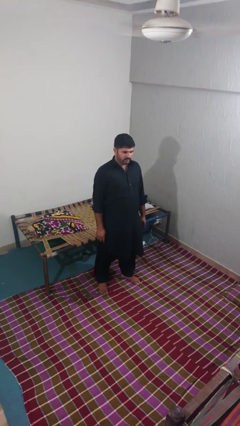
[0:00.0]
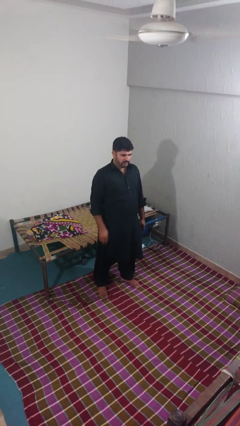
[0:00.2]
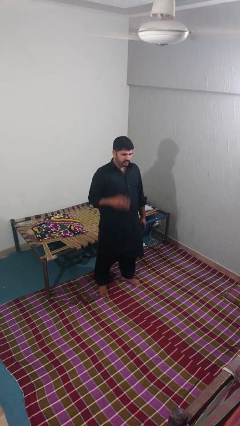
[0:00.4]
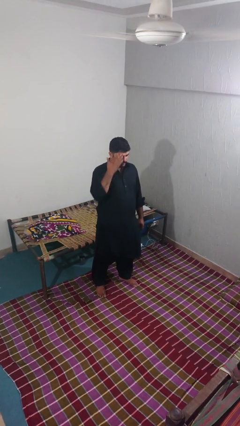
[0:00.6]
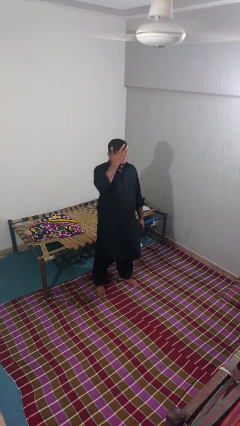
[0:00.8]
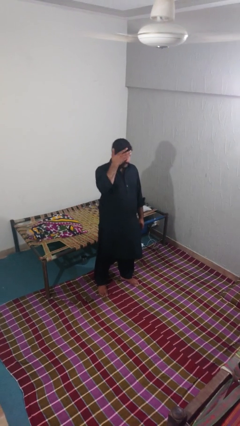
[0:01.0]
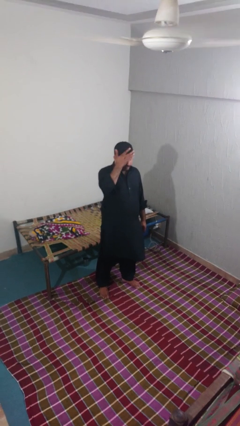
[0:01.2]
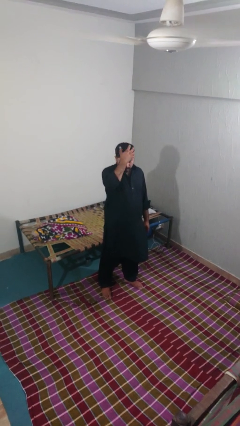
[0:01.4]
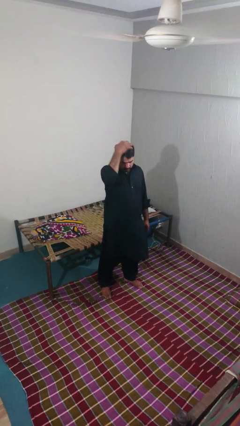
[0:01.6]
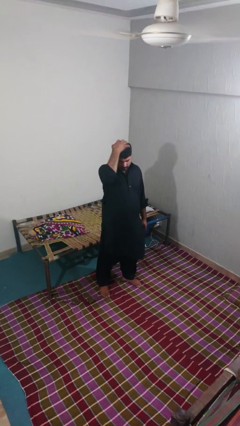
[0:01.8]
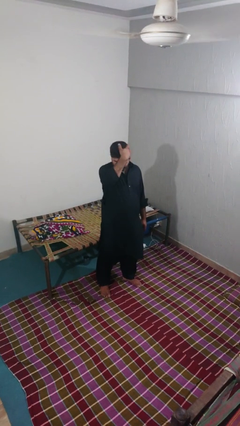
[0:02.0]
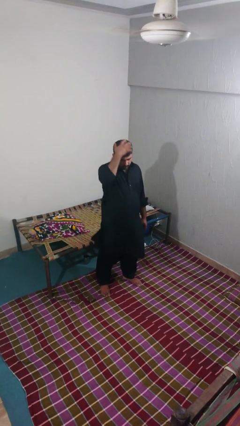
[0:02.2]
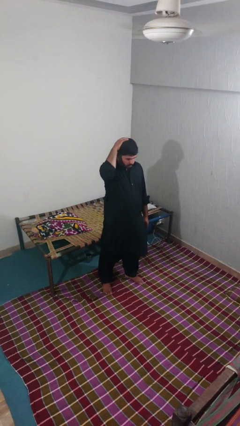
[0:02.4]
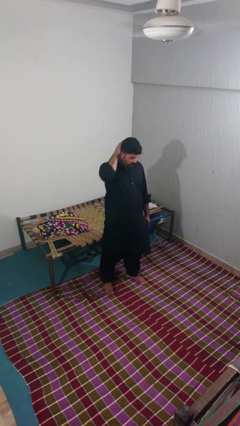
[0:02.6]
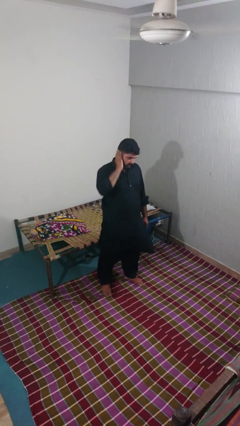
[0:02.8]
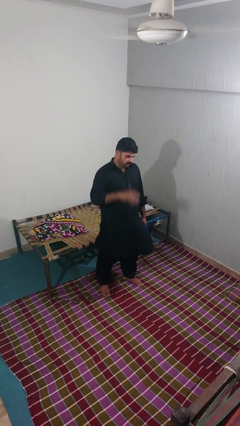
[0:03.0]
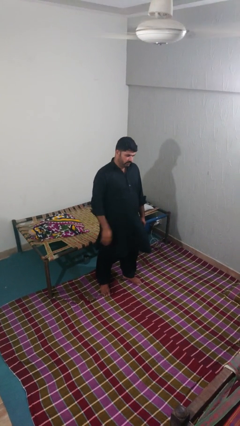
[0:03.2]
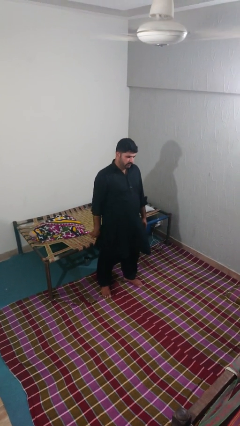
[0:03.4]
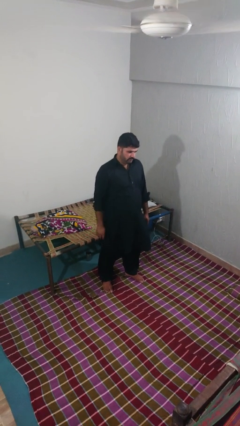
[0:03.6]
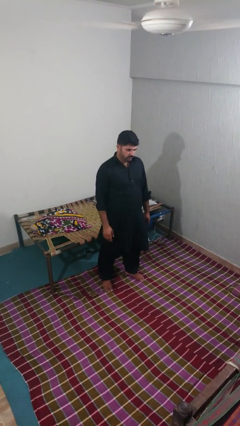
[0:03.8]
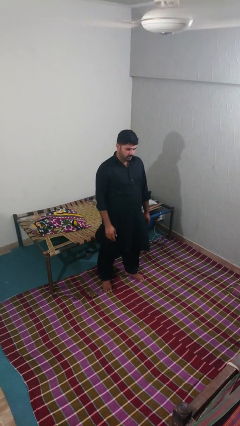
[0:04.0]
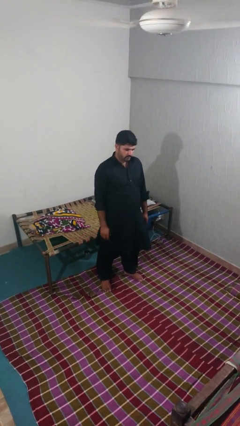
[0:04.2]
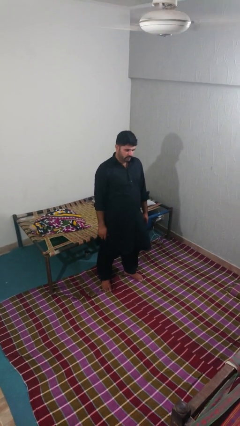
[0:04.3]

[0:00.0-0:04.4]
person scratches face

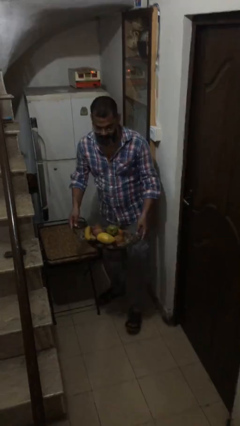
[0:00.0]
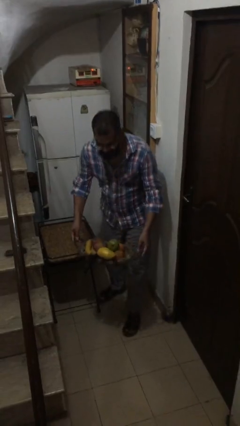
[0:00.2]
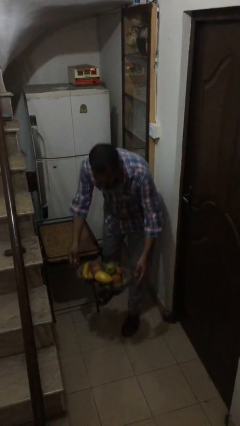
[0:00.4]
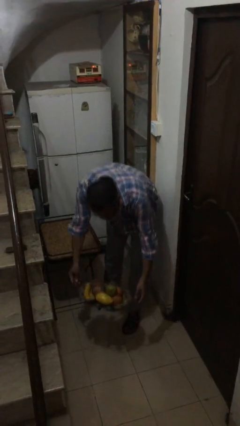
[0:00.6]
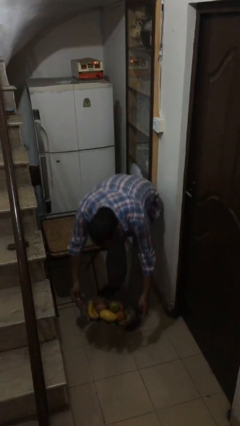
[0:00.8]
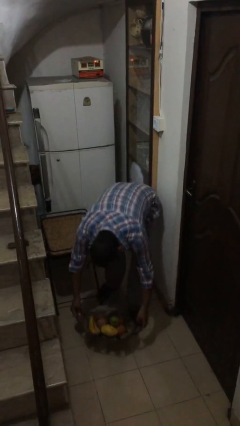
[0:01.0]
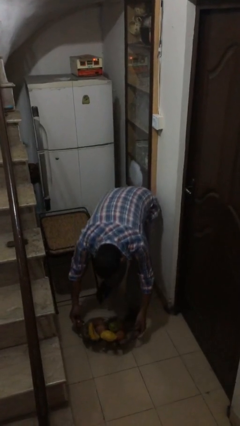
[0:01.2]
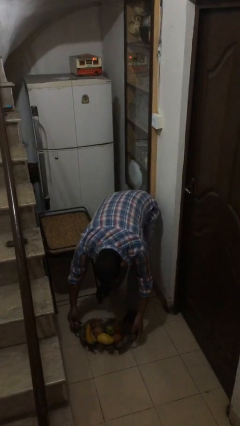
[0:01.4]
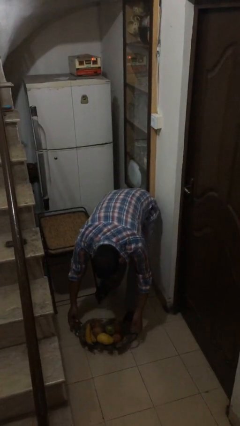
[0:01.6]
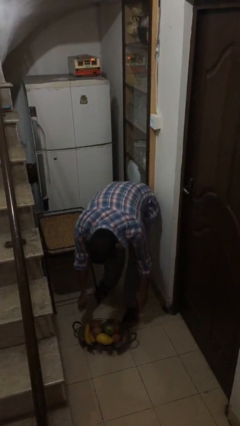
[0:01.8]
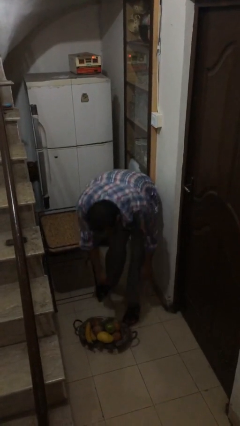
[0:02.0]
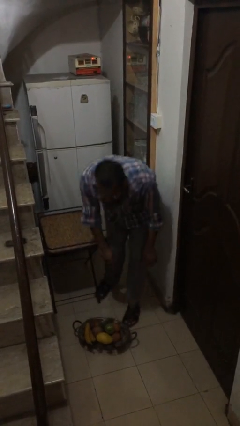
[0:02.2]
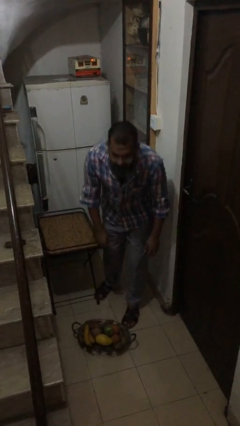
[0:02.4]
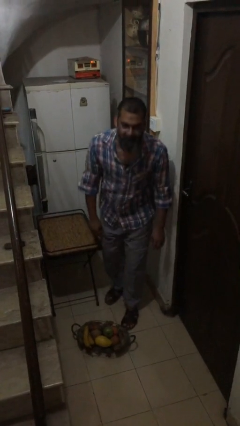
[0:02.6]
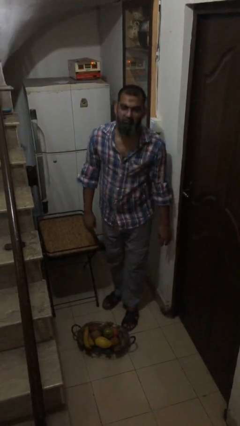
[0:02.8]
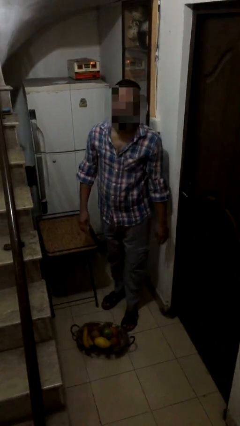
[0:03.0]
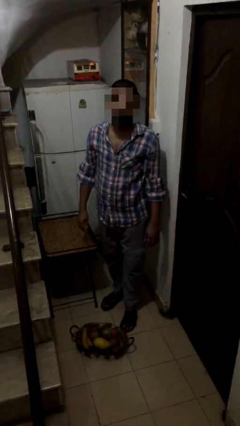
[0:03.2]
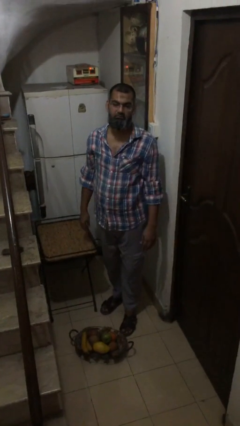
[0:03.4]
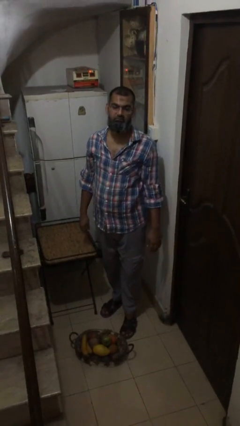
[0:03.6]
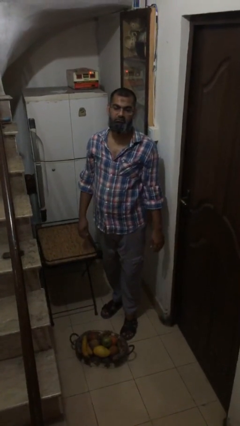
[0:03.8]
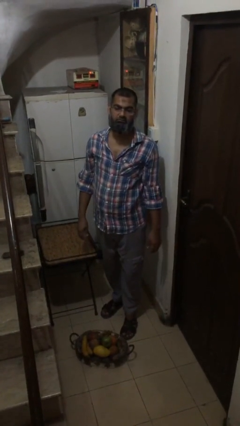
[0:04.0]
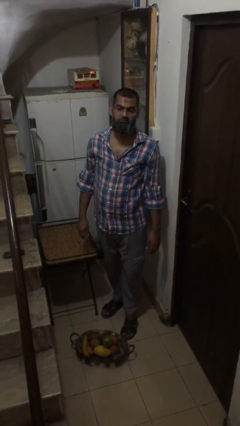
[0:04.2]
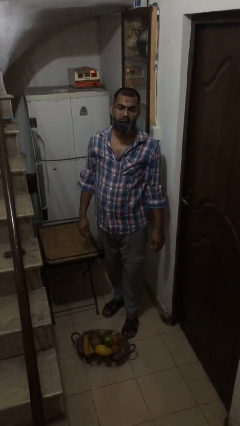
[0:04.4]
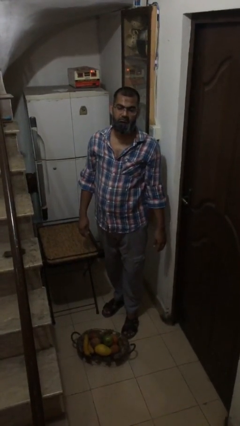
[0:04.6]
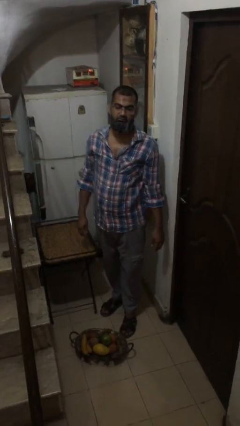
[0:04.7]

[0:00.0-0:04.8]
person puts down object on floor

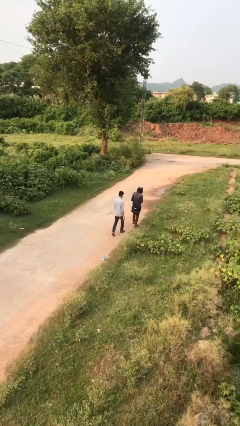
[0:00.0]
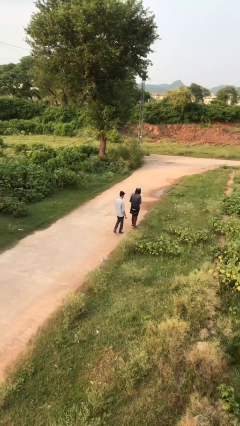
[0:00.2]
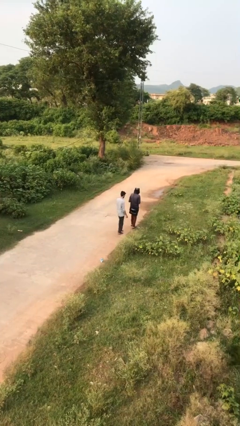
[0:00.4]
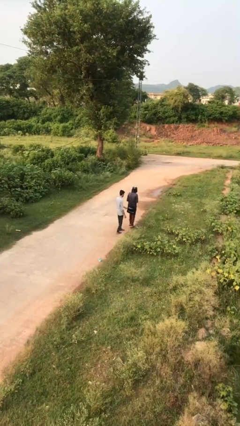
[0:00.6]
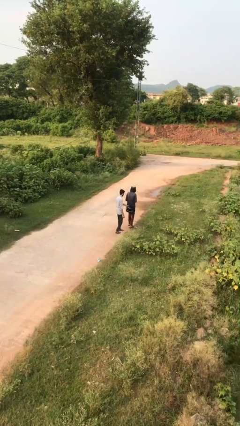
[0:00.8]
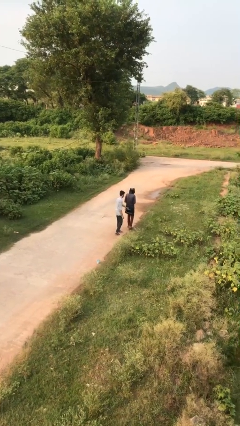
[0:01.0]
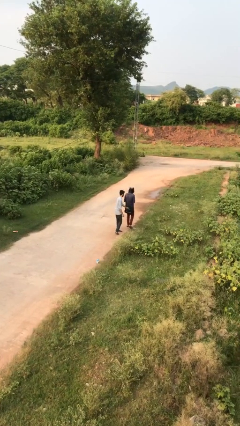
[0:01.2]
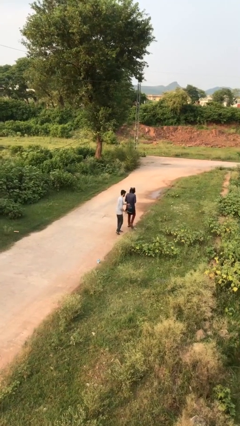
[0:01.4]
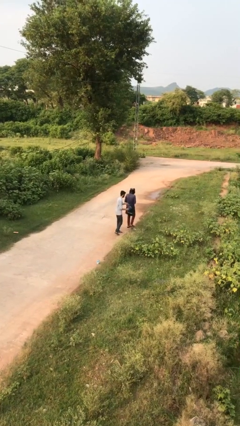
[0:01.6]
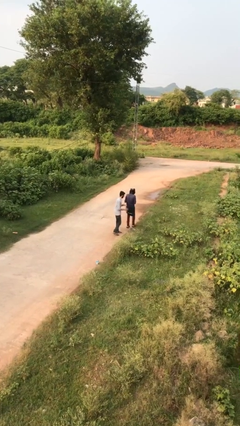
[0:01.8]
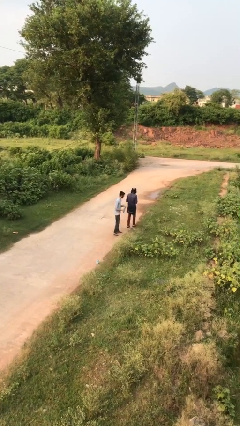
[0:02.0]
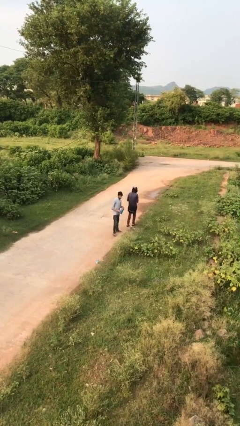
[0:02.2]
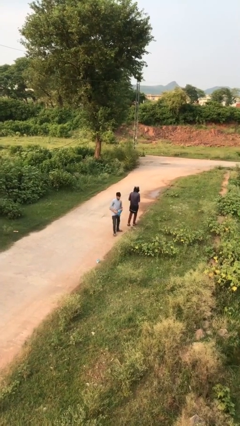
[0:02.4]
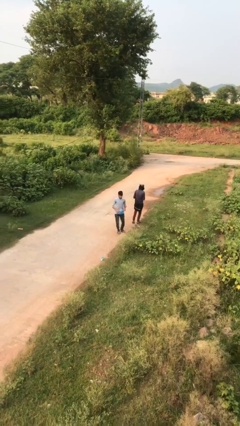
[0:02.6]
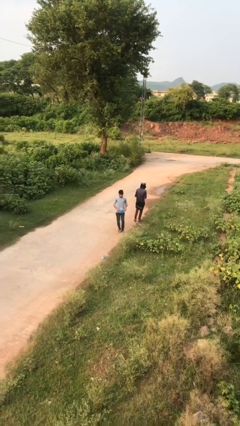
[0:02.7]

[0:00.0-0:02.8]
person steals object from person

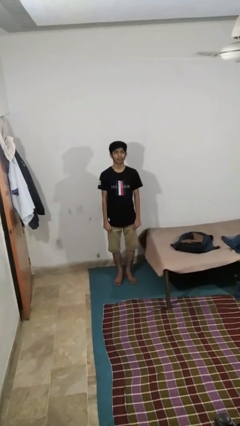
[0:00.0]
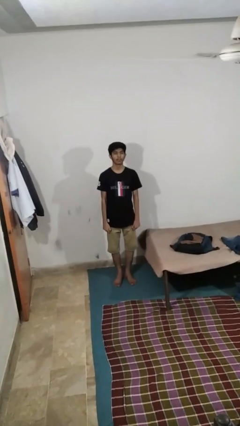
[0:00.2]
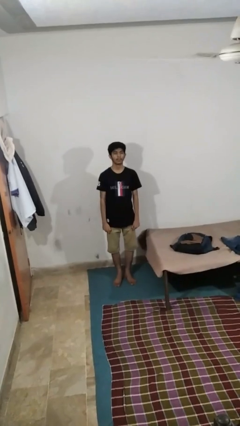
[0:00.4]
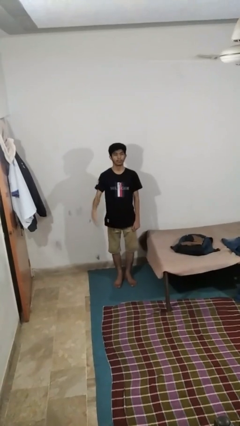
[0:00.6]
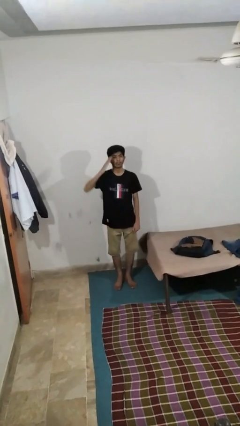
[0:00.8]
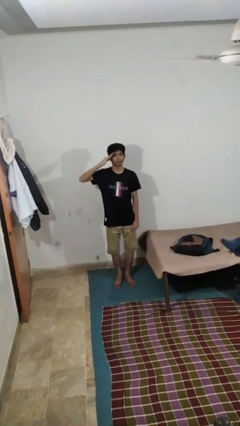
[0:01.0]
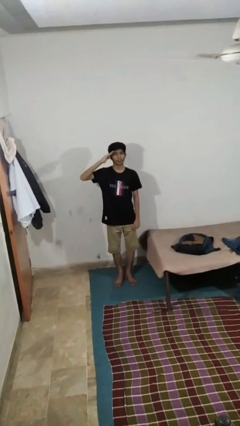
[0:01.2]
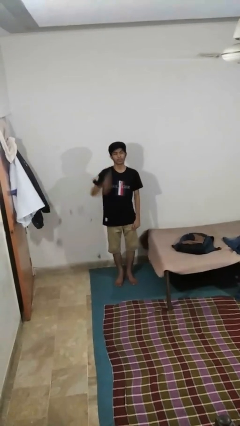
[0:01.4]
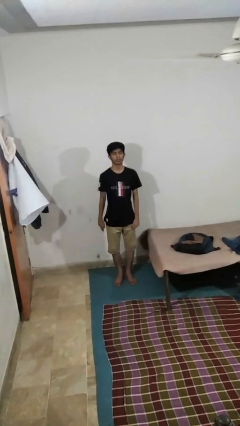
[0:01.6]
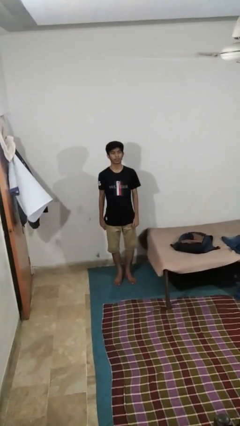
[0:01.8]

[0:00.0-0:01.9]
person salutes

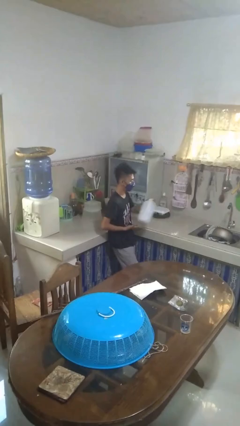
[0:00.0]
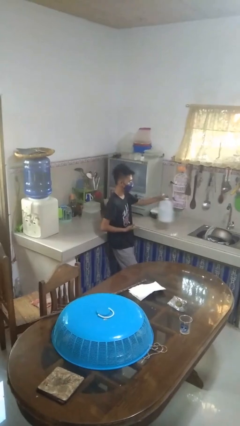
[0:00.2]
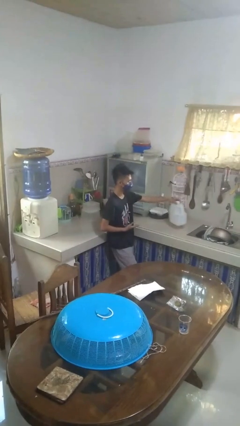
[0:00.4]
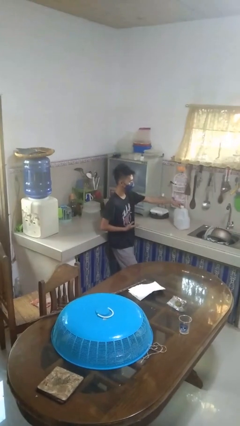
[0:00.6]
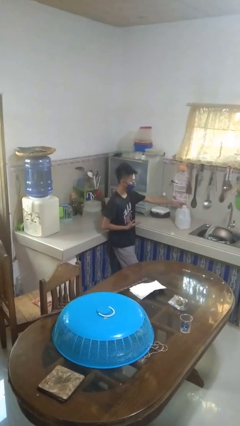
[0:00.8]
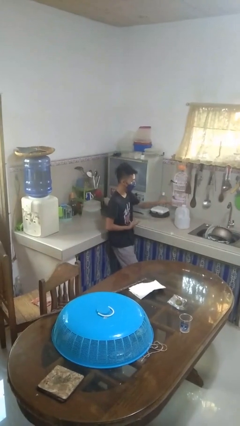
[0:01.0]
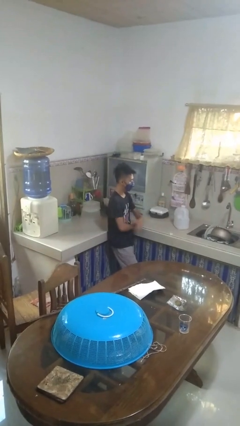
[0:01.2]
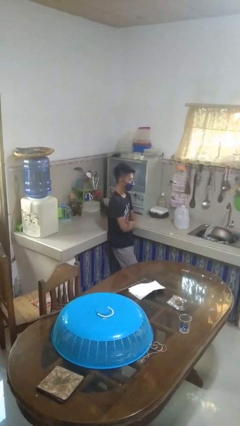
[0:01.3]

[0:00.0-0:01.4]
person puts down object on countertop

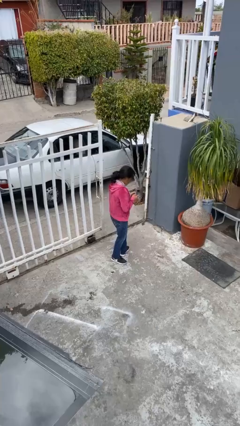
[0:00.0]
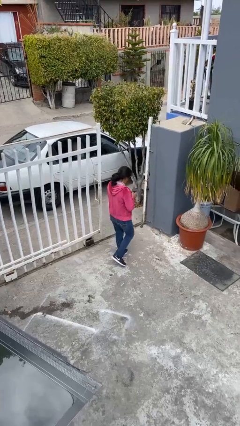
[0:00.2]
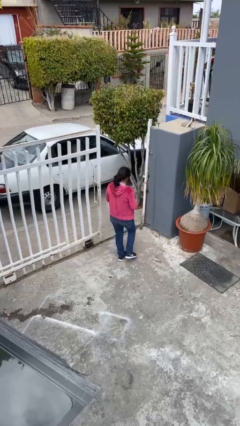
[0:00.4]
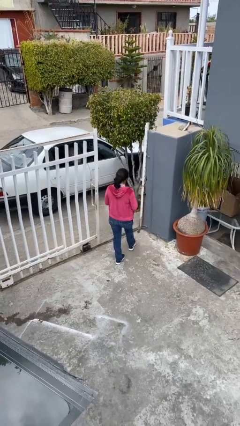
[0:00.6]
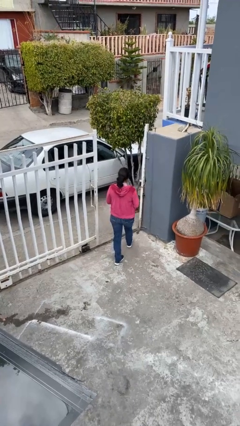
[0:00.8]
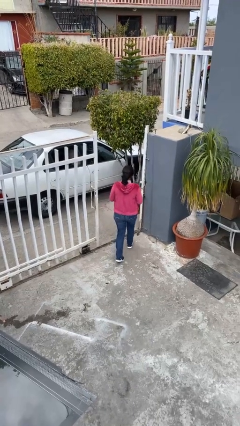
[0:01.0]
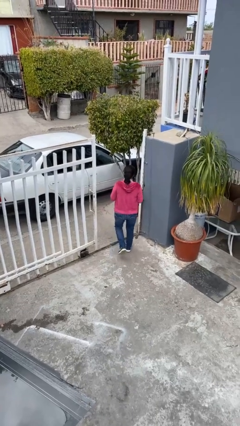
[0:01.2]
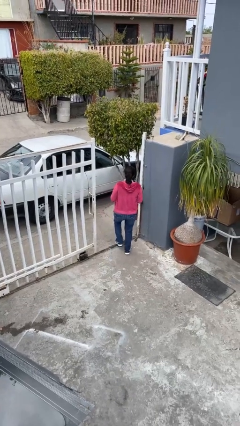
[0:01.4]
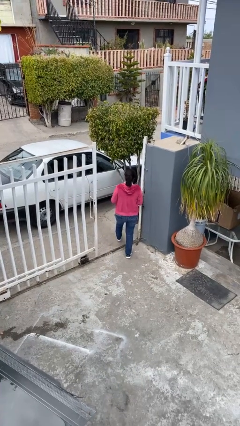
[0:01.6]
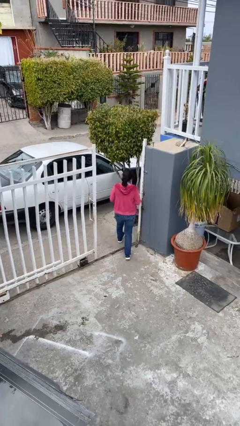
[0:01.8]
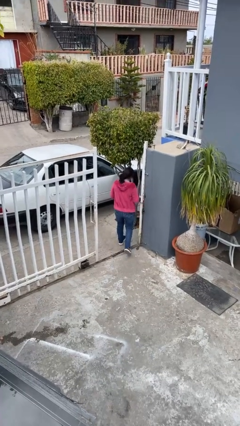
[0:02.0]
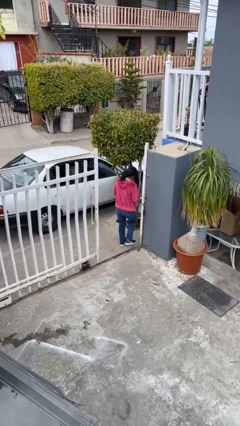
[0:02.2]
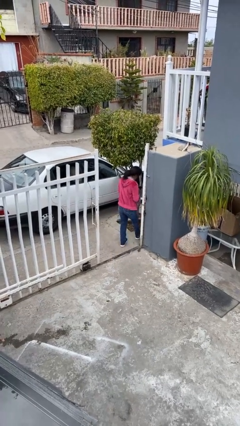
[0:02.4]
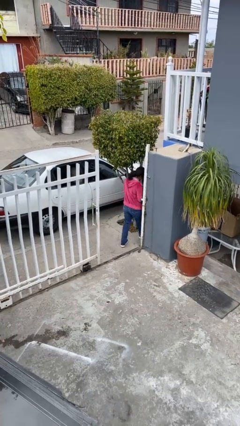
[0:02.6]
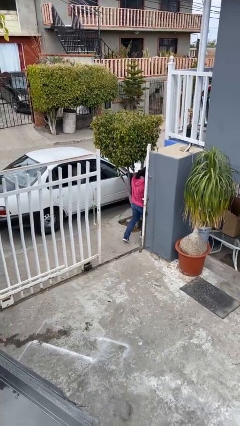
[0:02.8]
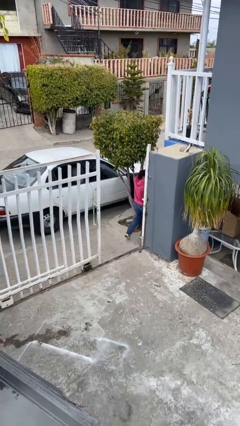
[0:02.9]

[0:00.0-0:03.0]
person exits scene through structure
